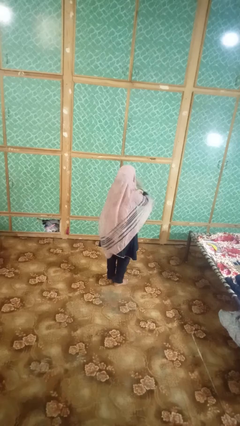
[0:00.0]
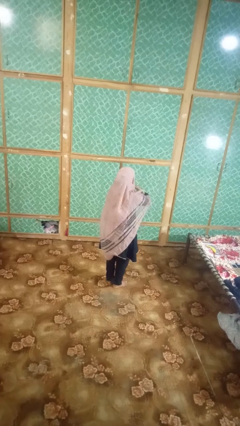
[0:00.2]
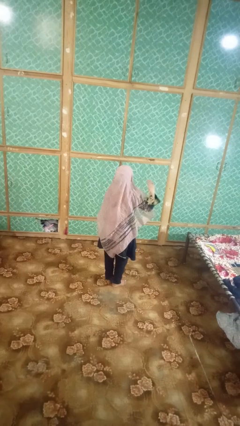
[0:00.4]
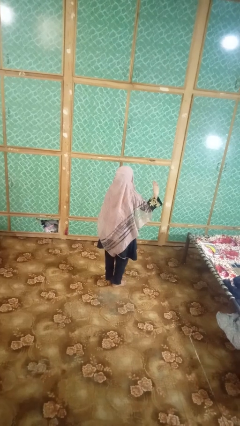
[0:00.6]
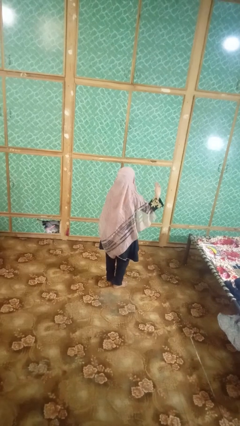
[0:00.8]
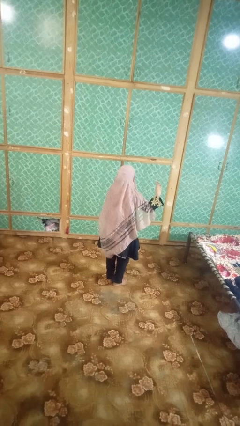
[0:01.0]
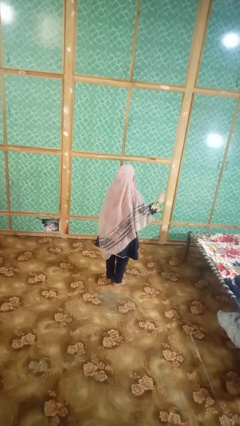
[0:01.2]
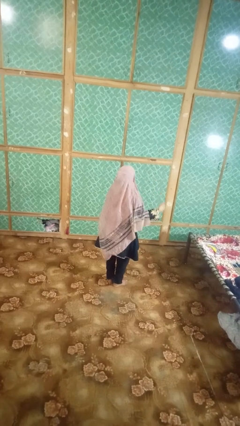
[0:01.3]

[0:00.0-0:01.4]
person gestures cut

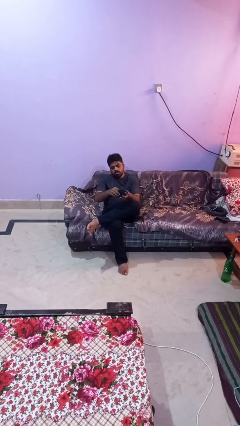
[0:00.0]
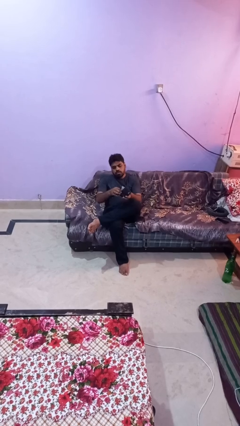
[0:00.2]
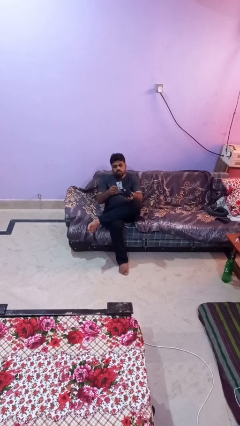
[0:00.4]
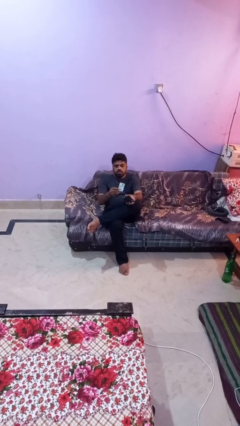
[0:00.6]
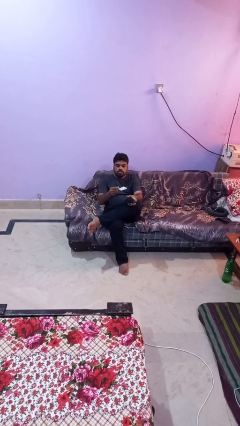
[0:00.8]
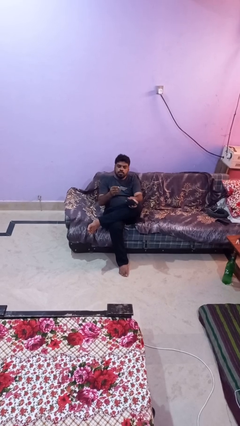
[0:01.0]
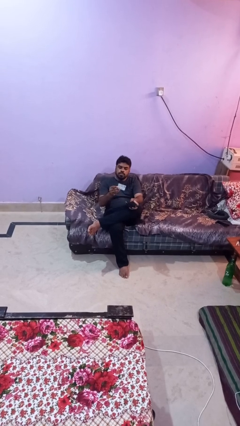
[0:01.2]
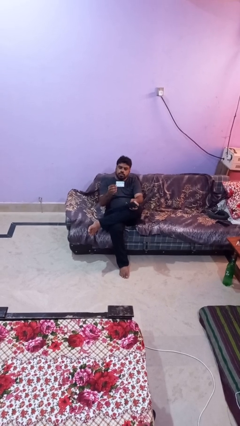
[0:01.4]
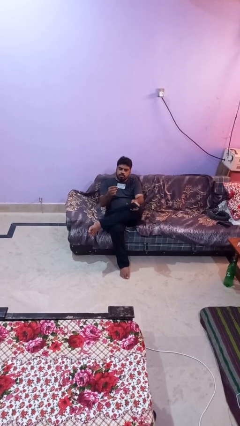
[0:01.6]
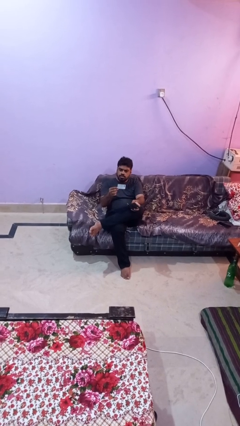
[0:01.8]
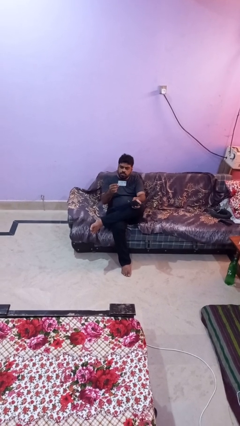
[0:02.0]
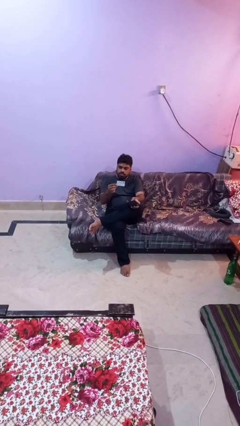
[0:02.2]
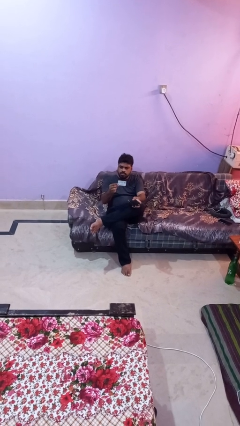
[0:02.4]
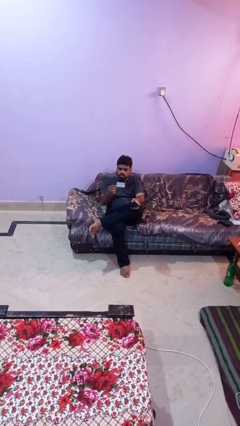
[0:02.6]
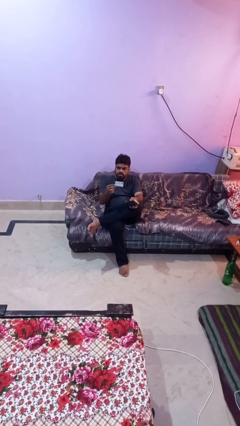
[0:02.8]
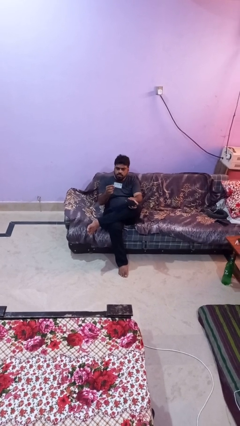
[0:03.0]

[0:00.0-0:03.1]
person takes object from purse

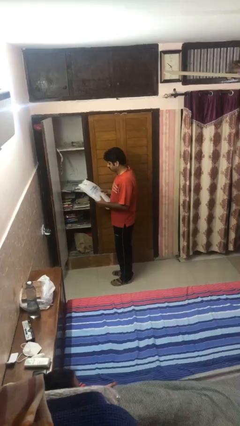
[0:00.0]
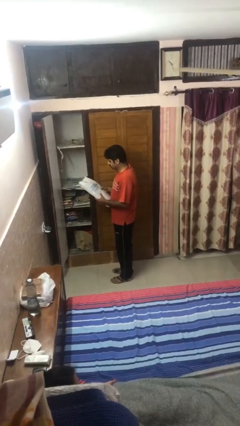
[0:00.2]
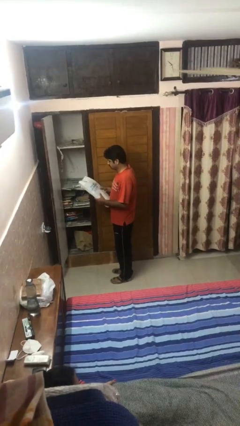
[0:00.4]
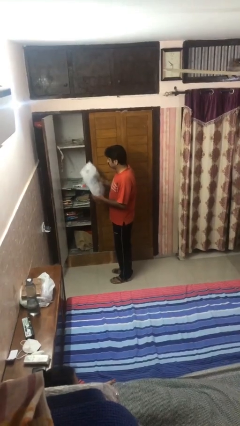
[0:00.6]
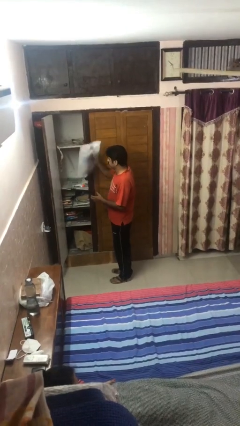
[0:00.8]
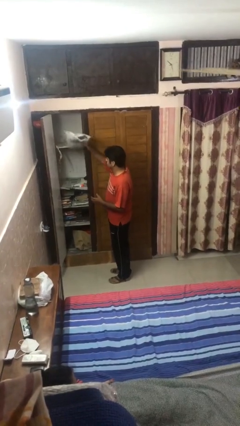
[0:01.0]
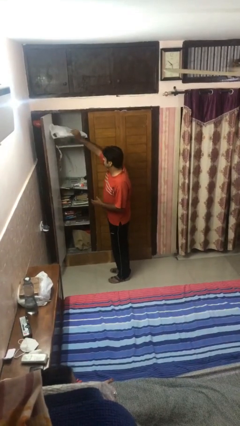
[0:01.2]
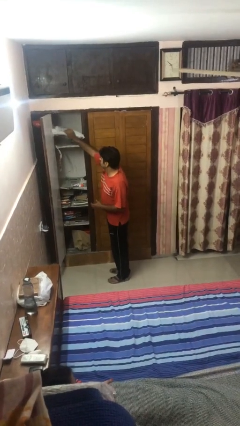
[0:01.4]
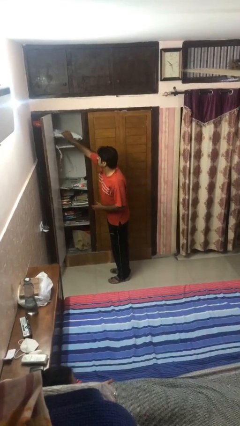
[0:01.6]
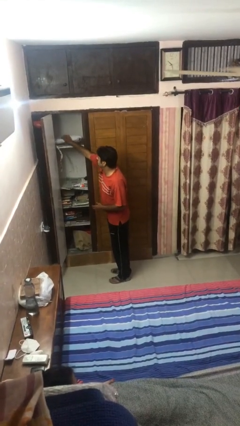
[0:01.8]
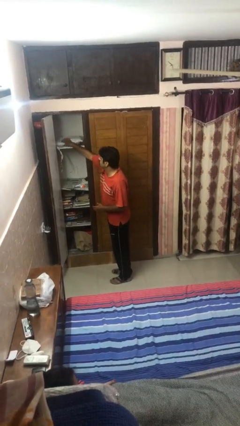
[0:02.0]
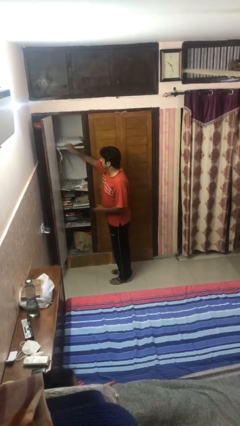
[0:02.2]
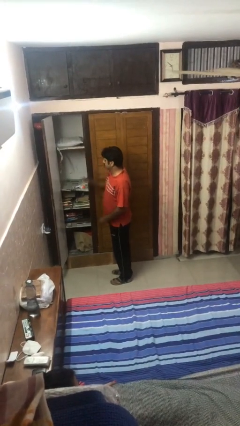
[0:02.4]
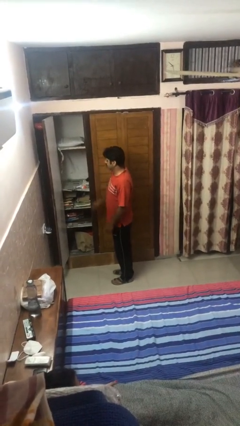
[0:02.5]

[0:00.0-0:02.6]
person puts down object on shelf

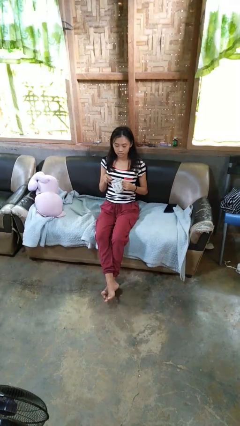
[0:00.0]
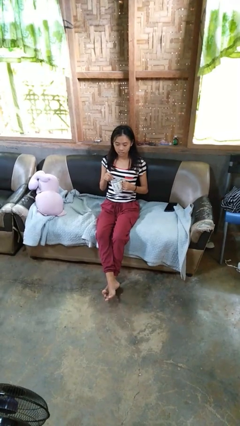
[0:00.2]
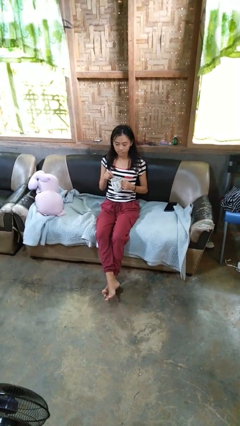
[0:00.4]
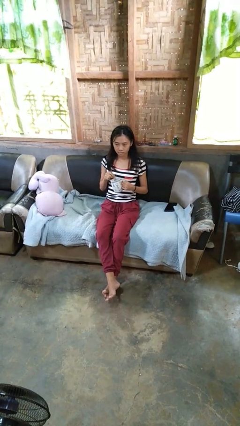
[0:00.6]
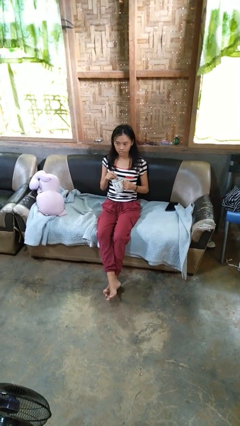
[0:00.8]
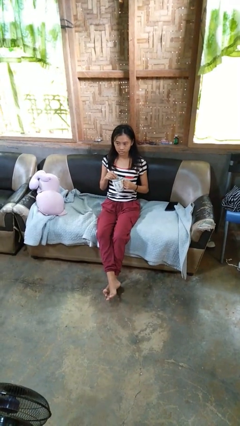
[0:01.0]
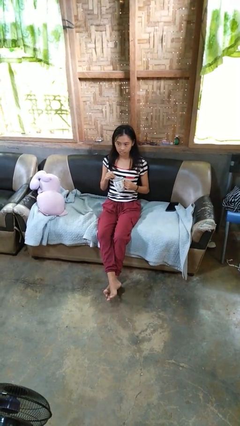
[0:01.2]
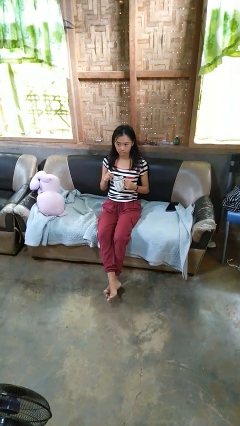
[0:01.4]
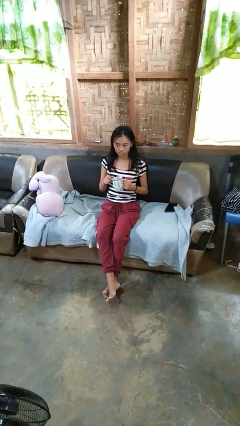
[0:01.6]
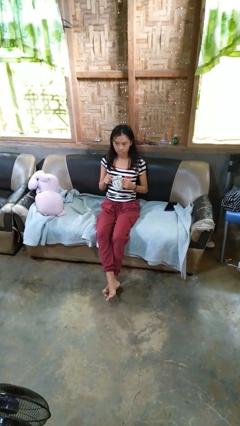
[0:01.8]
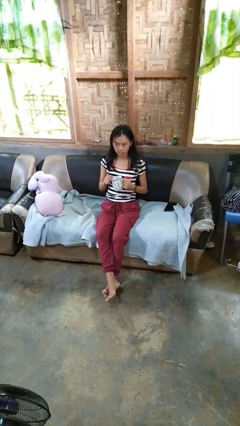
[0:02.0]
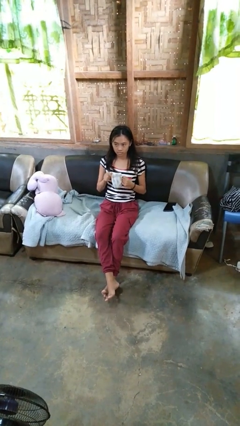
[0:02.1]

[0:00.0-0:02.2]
person stirs mug

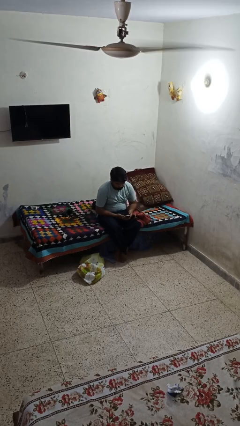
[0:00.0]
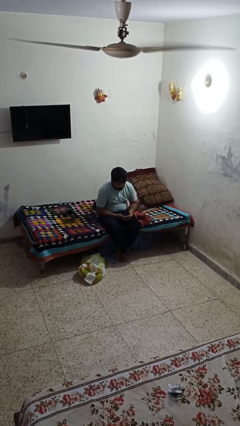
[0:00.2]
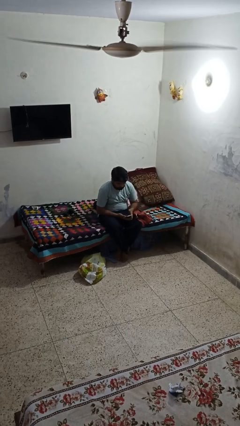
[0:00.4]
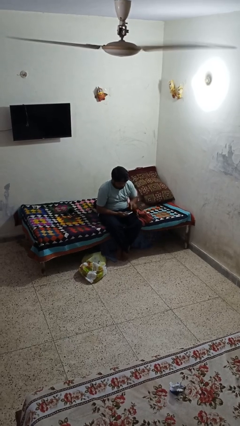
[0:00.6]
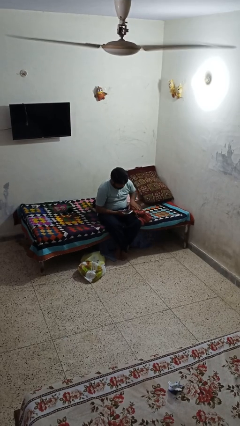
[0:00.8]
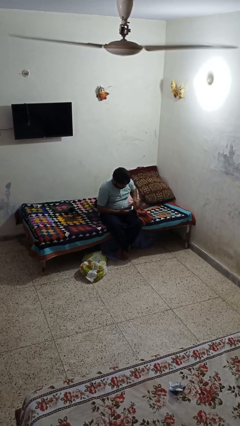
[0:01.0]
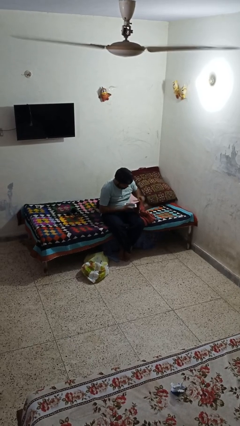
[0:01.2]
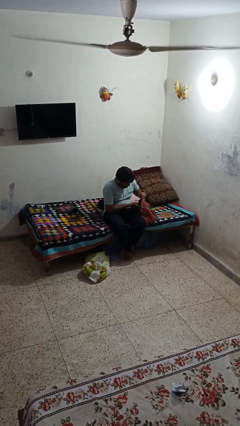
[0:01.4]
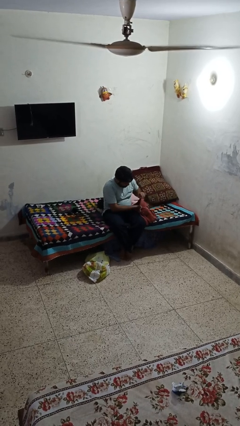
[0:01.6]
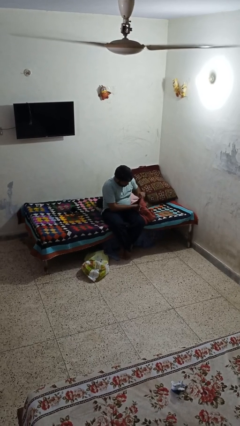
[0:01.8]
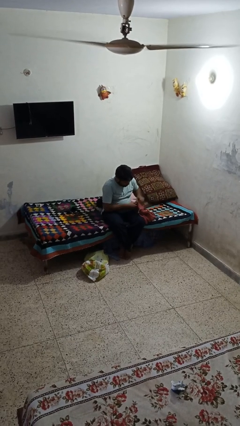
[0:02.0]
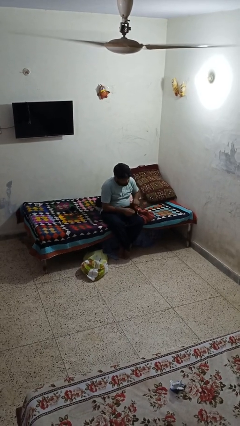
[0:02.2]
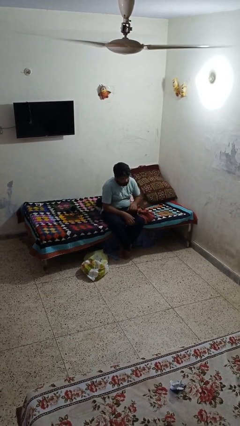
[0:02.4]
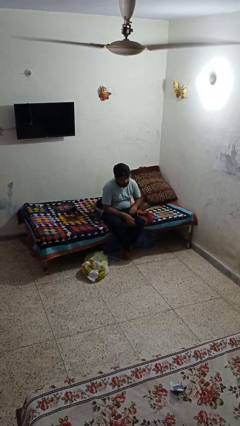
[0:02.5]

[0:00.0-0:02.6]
person puts object into purse

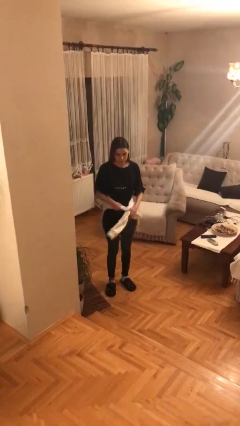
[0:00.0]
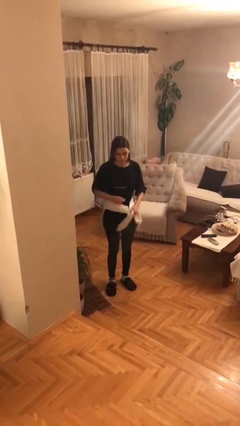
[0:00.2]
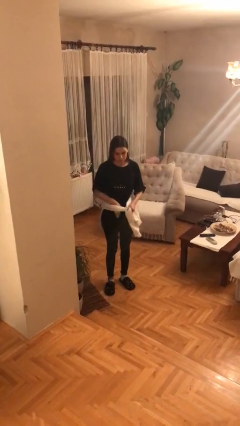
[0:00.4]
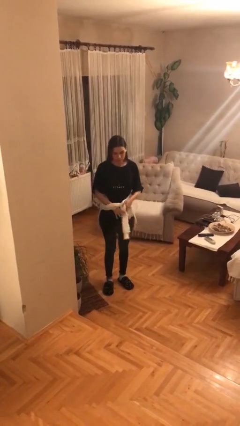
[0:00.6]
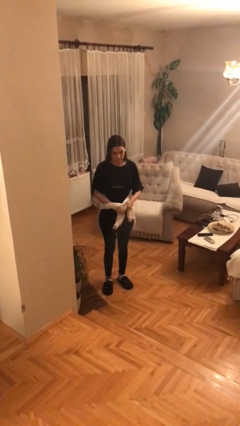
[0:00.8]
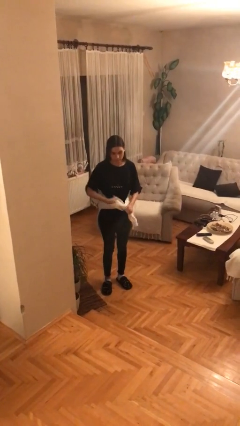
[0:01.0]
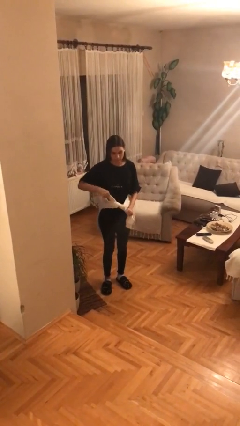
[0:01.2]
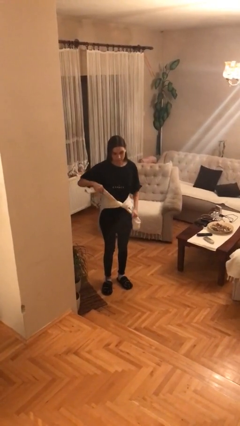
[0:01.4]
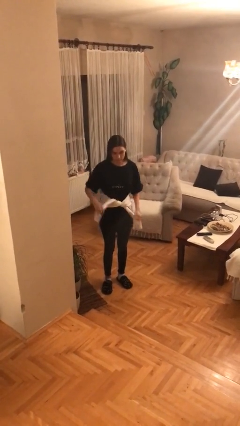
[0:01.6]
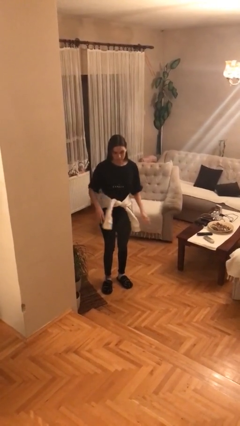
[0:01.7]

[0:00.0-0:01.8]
person ties jacket around waist

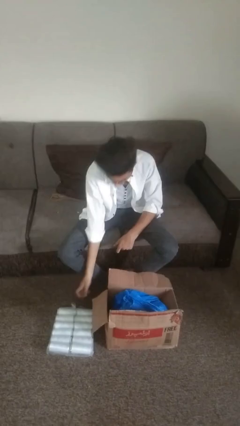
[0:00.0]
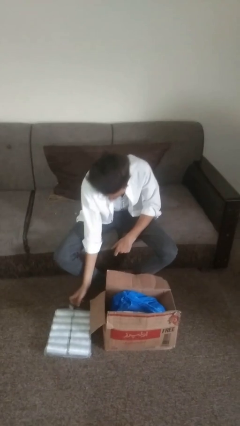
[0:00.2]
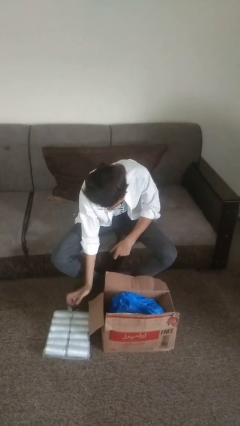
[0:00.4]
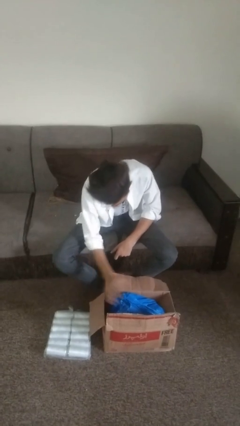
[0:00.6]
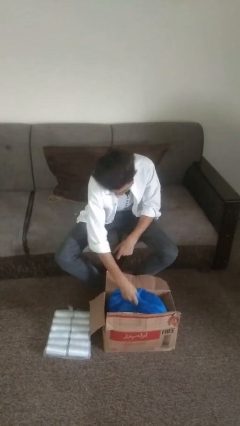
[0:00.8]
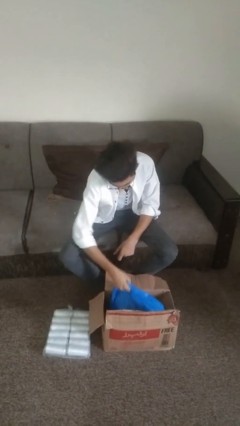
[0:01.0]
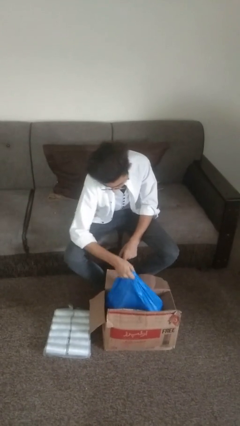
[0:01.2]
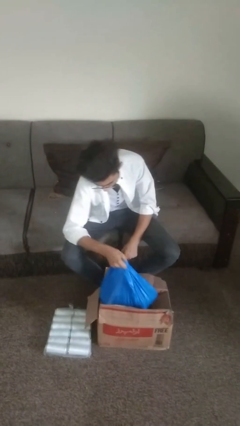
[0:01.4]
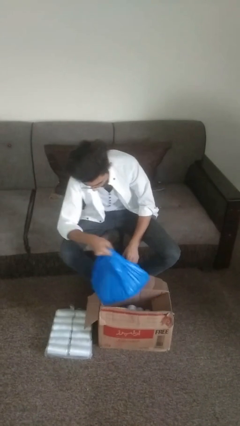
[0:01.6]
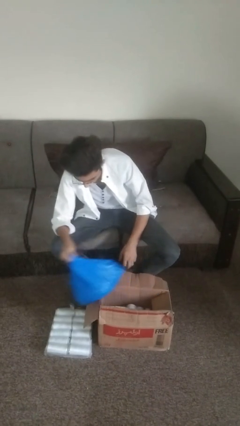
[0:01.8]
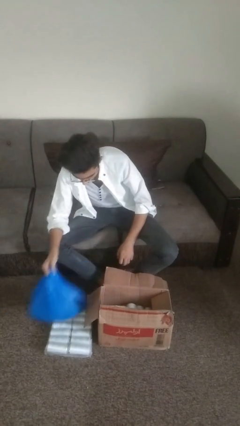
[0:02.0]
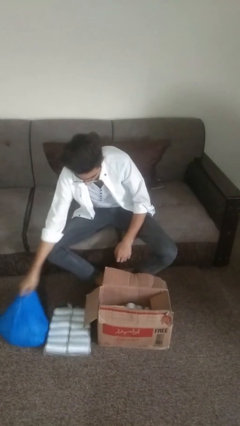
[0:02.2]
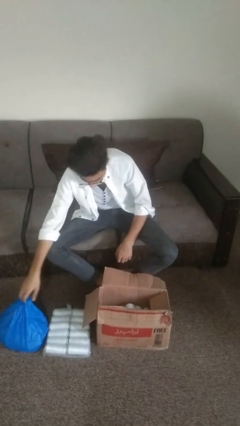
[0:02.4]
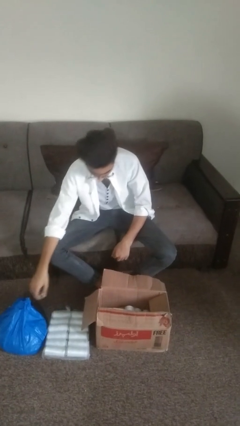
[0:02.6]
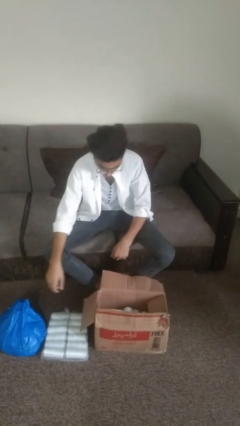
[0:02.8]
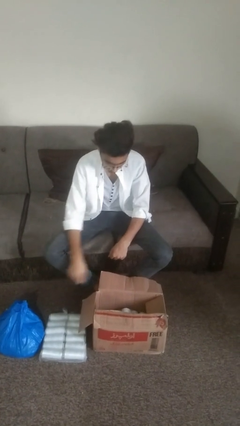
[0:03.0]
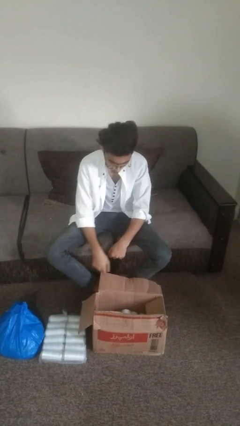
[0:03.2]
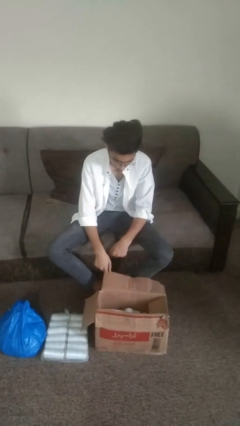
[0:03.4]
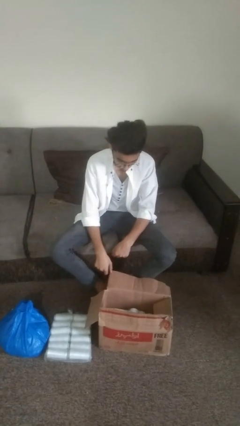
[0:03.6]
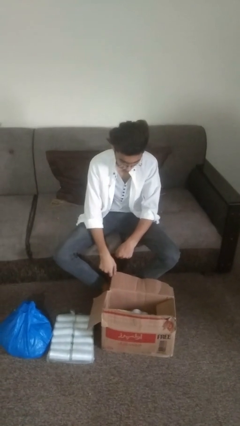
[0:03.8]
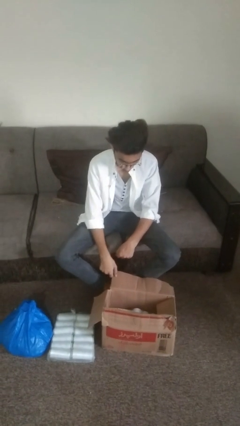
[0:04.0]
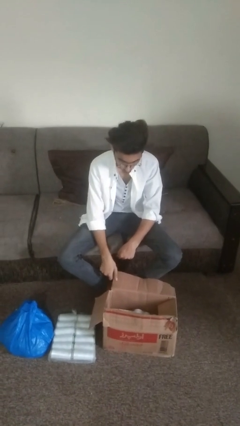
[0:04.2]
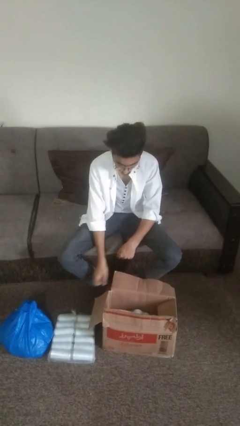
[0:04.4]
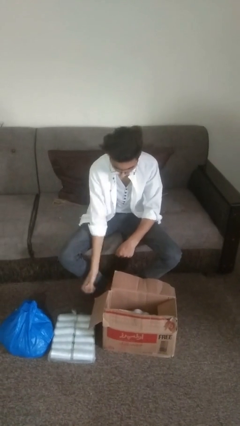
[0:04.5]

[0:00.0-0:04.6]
person takes object from box
